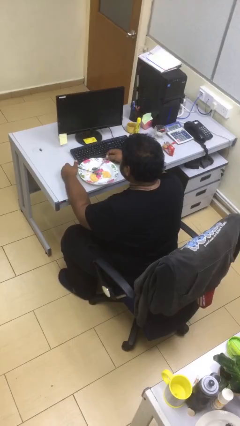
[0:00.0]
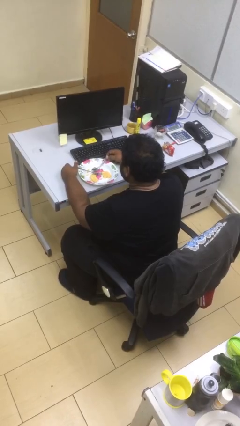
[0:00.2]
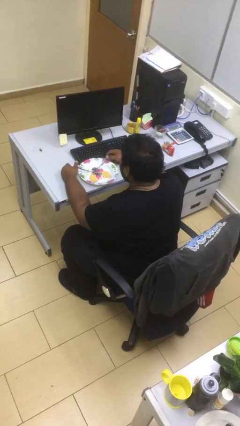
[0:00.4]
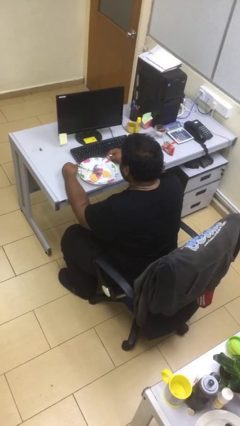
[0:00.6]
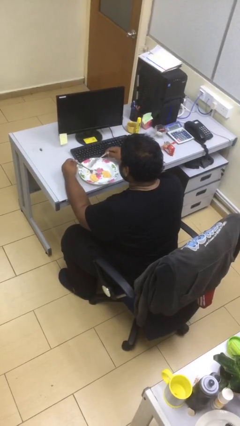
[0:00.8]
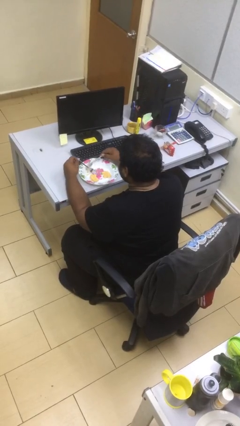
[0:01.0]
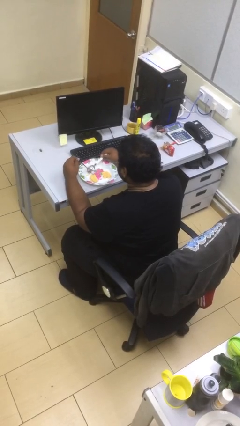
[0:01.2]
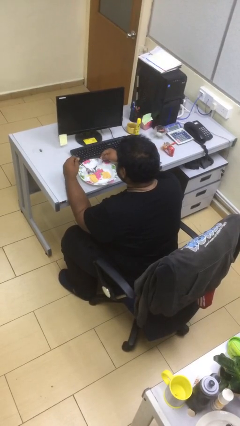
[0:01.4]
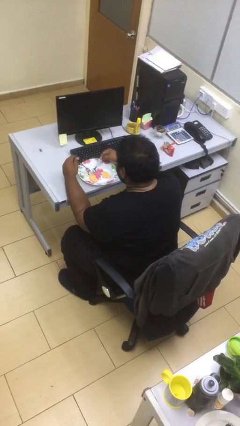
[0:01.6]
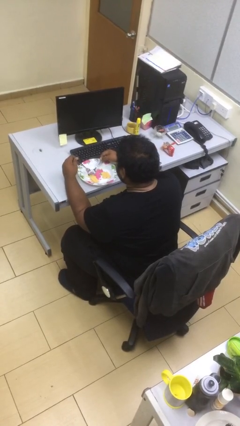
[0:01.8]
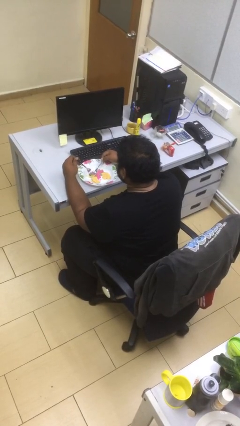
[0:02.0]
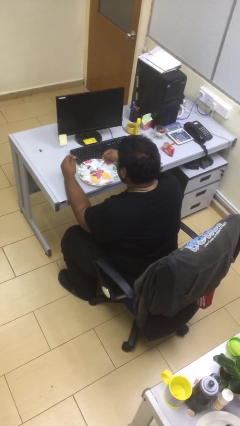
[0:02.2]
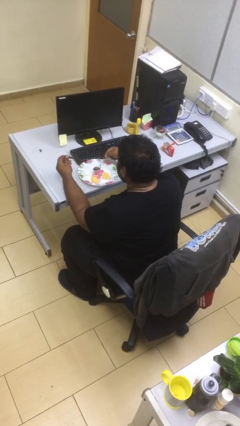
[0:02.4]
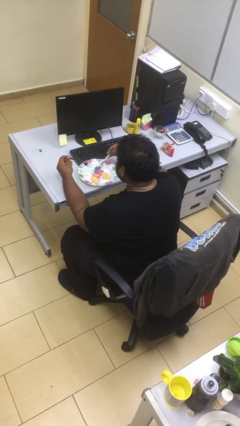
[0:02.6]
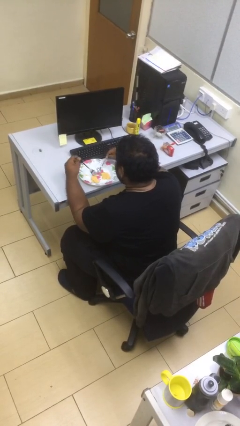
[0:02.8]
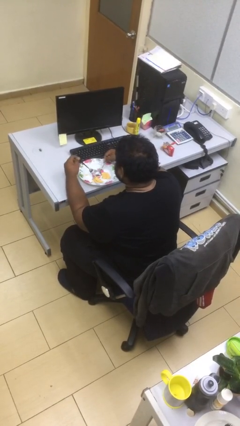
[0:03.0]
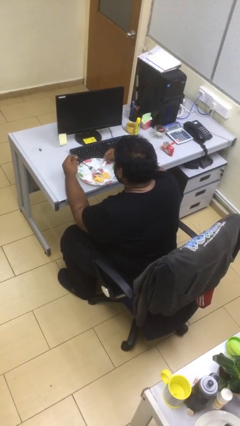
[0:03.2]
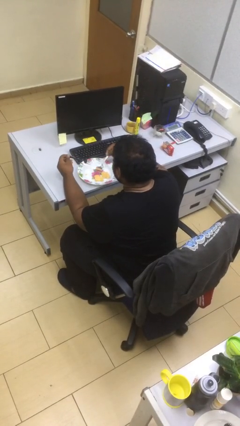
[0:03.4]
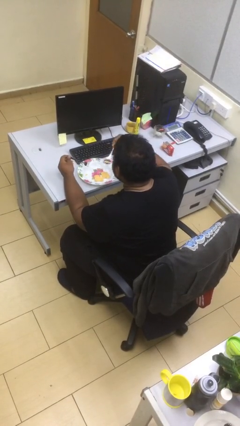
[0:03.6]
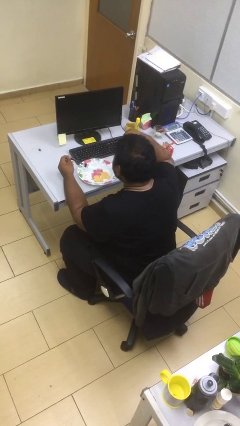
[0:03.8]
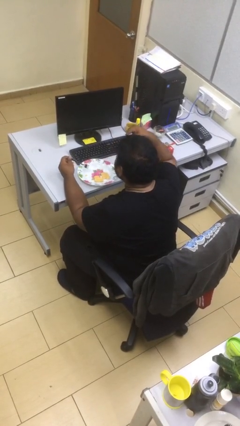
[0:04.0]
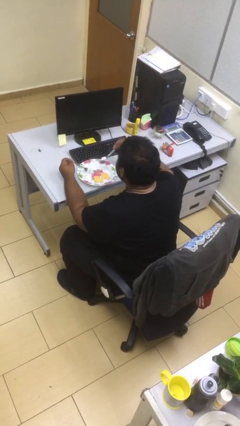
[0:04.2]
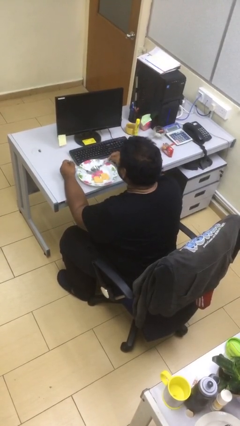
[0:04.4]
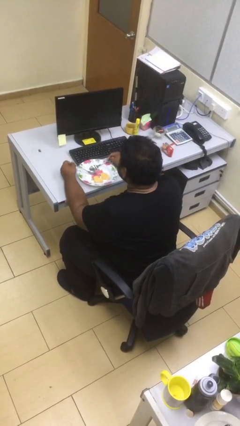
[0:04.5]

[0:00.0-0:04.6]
person eats with utensil

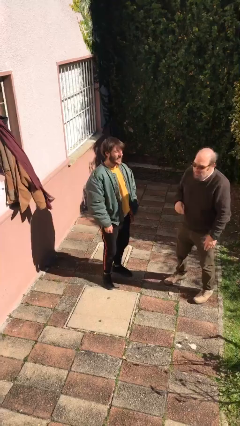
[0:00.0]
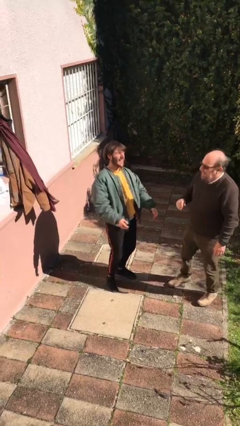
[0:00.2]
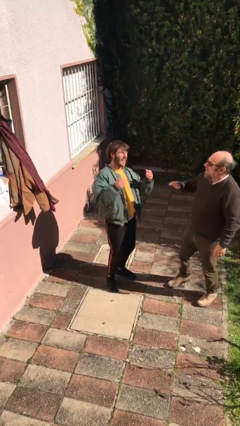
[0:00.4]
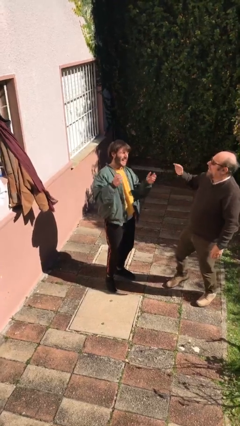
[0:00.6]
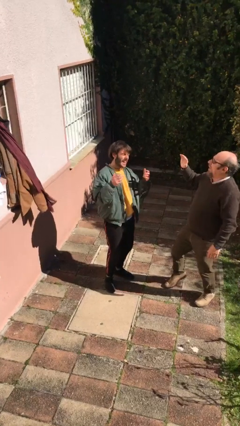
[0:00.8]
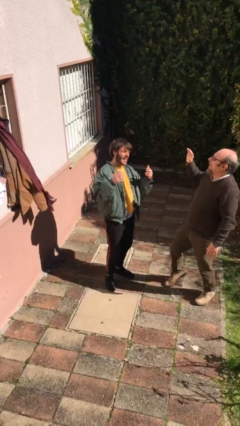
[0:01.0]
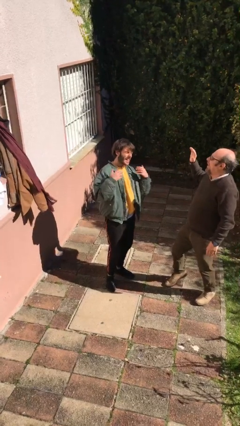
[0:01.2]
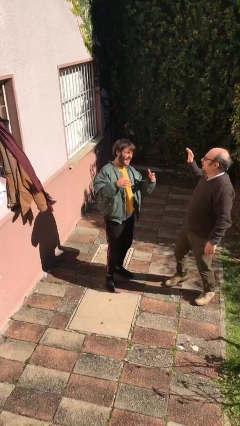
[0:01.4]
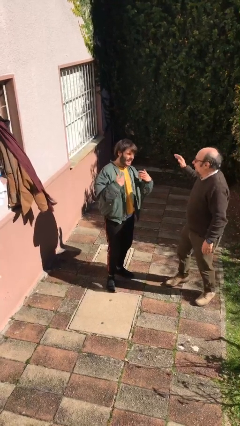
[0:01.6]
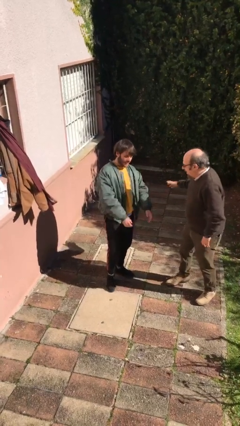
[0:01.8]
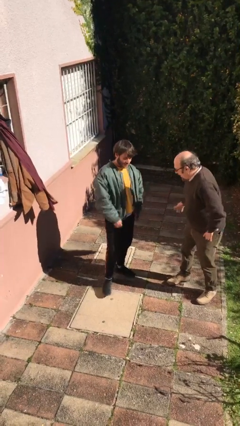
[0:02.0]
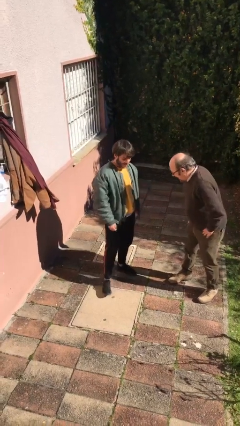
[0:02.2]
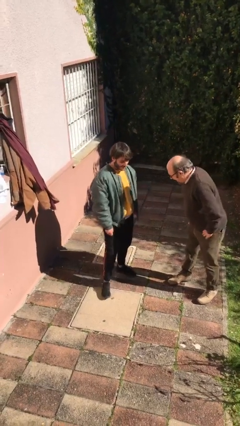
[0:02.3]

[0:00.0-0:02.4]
person laughs with person

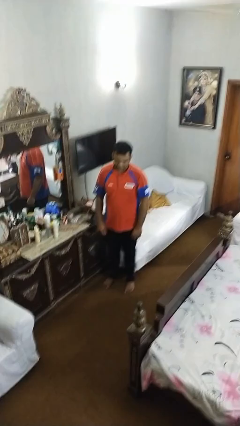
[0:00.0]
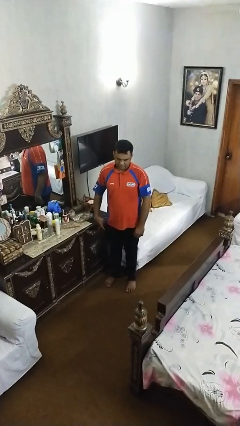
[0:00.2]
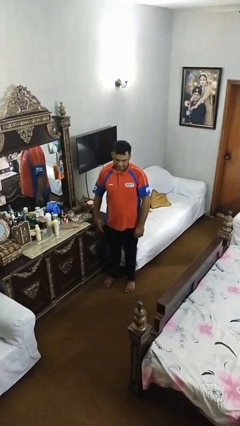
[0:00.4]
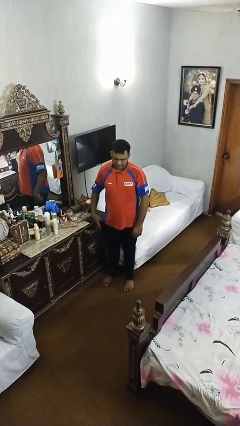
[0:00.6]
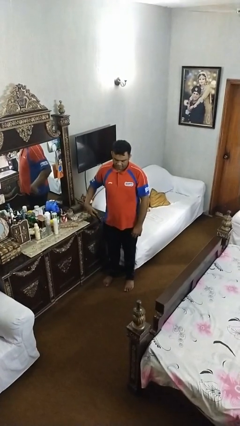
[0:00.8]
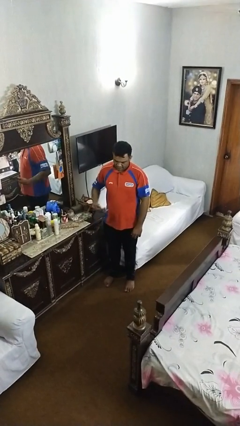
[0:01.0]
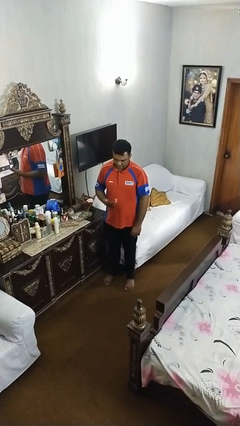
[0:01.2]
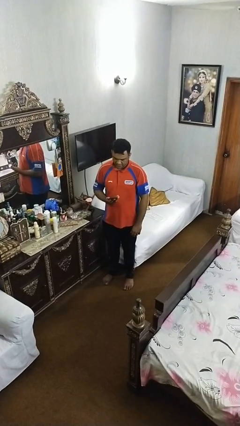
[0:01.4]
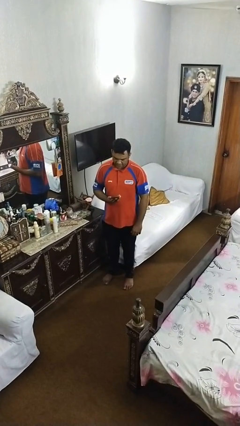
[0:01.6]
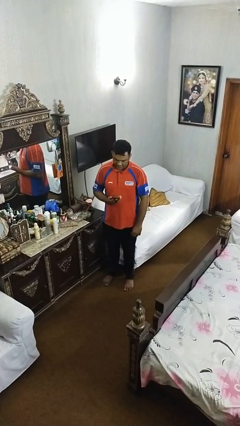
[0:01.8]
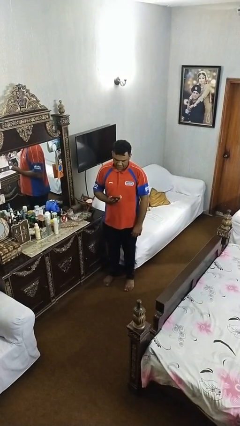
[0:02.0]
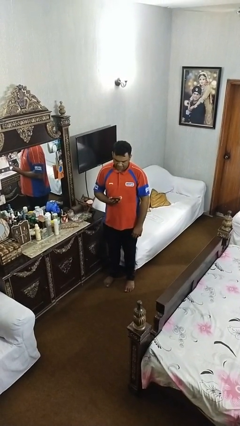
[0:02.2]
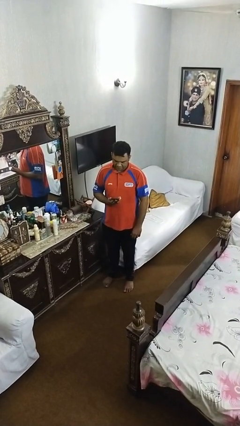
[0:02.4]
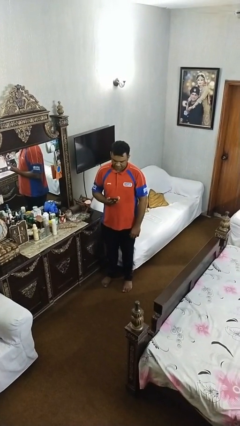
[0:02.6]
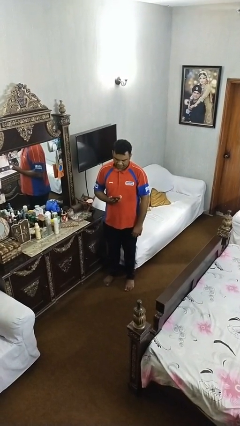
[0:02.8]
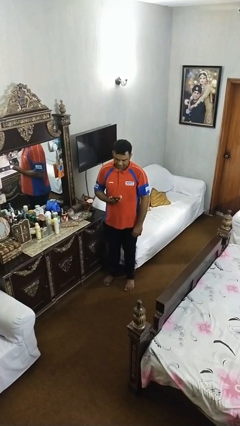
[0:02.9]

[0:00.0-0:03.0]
person takes phone from pocket

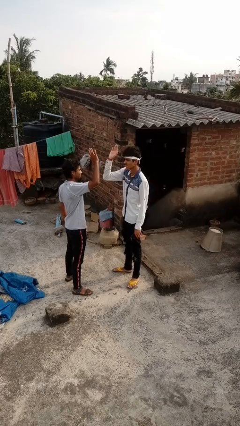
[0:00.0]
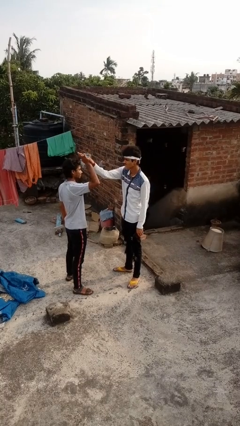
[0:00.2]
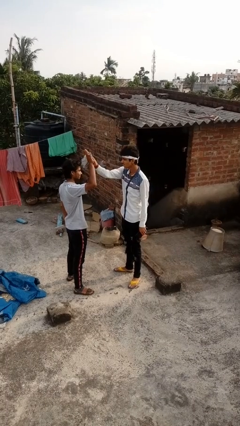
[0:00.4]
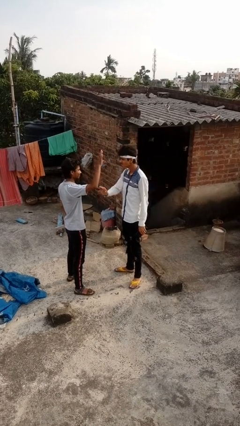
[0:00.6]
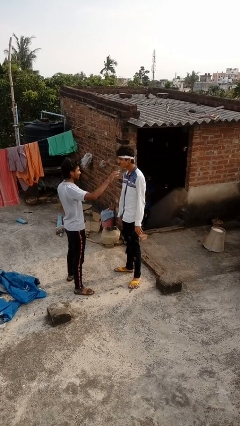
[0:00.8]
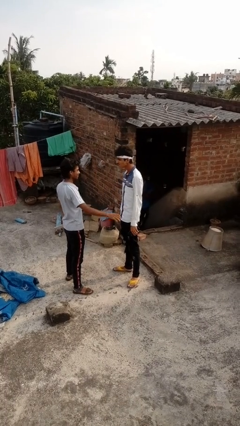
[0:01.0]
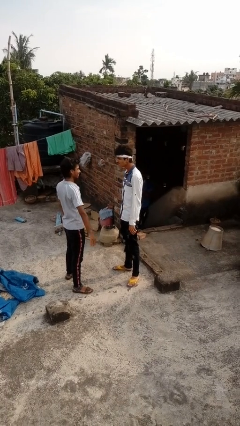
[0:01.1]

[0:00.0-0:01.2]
person highfives hand

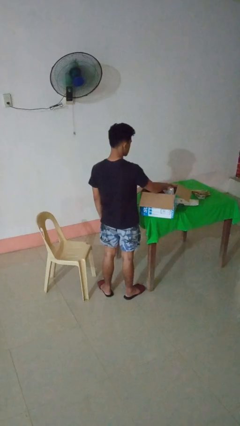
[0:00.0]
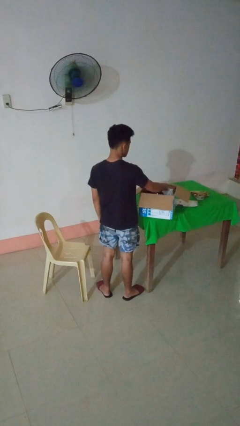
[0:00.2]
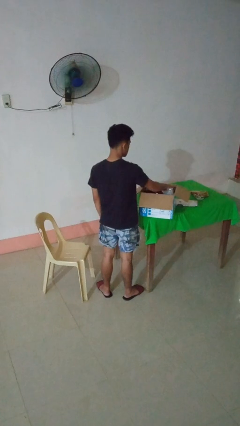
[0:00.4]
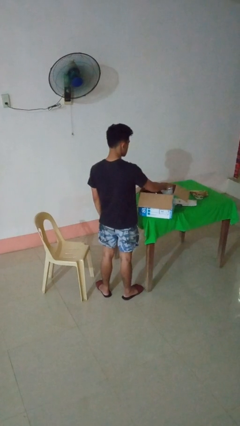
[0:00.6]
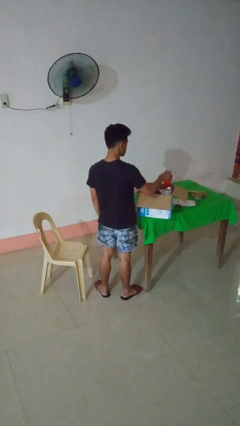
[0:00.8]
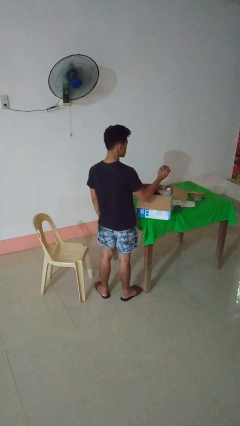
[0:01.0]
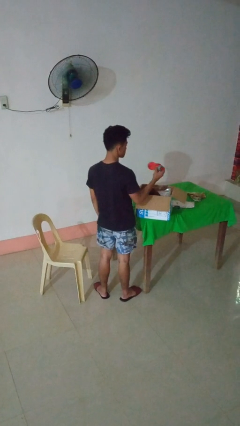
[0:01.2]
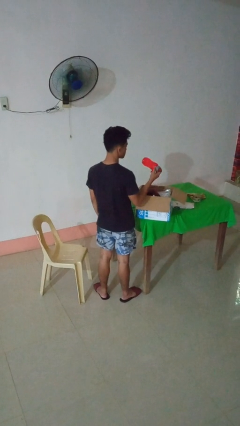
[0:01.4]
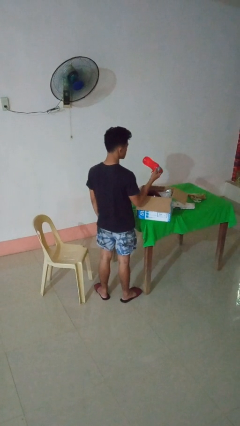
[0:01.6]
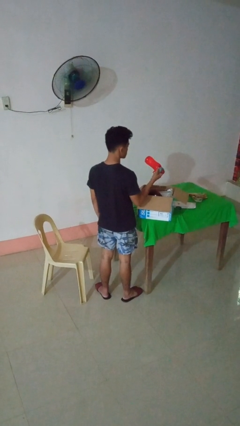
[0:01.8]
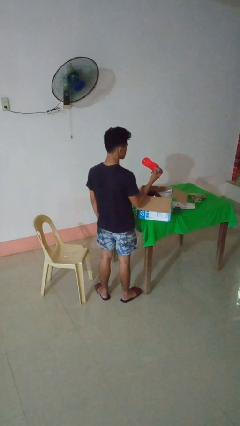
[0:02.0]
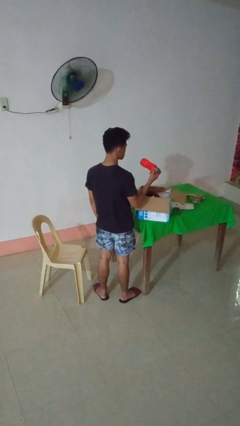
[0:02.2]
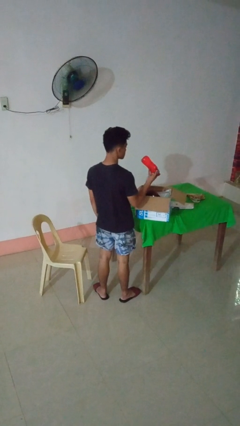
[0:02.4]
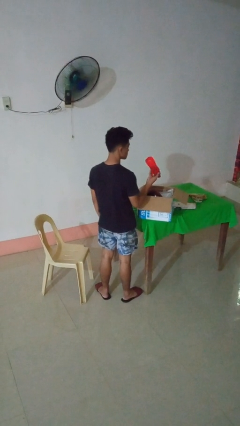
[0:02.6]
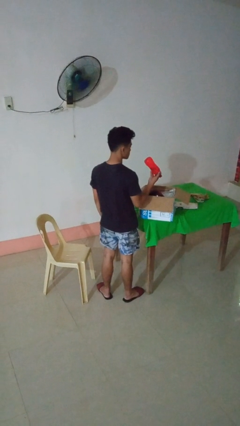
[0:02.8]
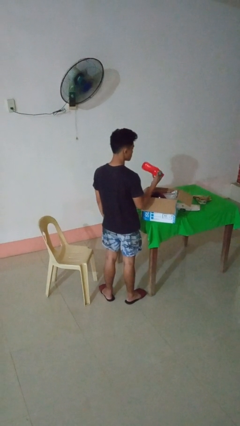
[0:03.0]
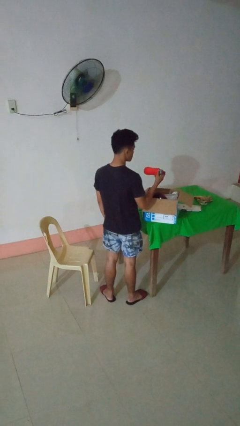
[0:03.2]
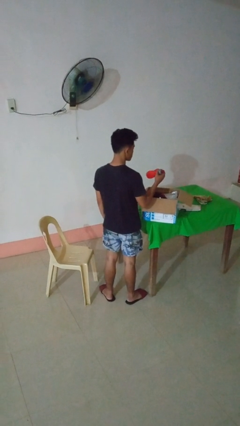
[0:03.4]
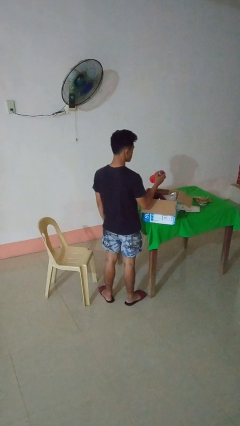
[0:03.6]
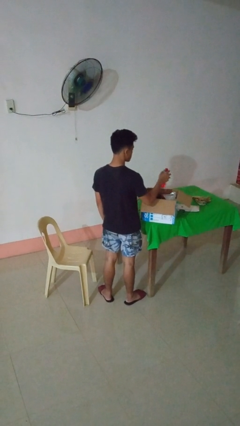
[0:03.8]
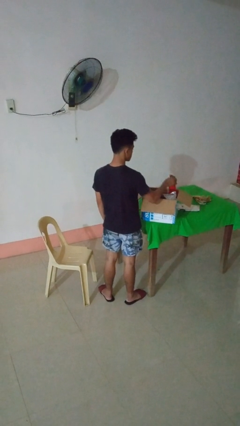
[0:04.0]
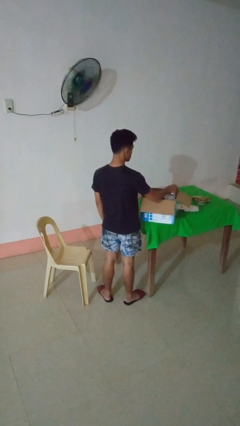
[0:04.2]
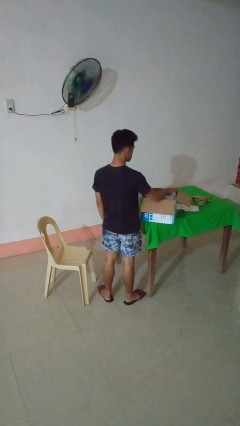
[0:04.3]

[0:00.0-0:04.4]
person takes object from box

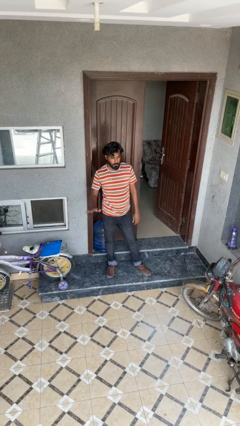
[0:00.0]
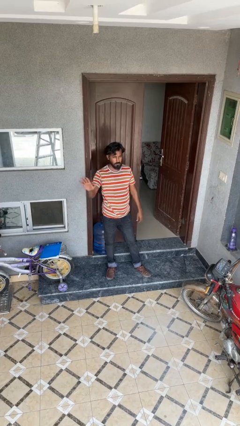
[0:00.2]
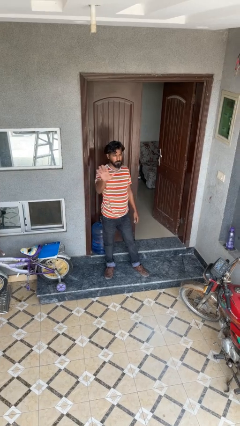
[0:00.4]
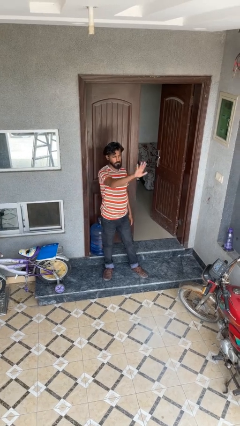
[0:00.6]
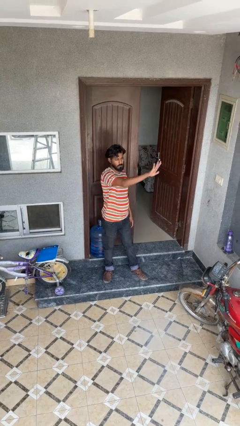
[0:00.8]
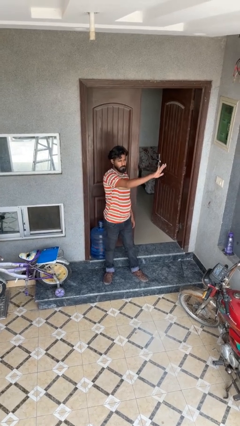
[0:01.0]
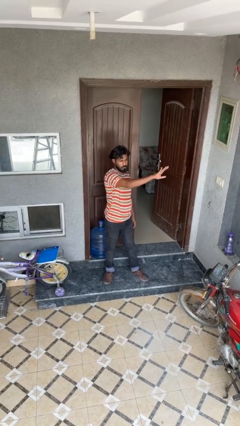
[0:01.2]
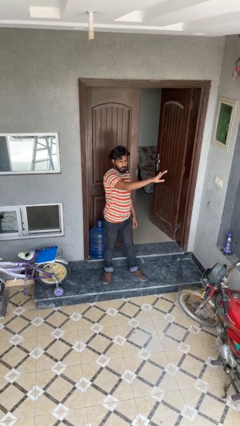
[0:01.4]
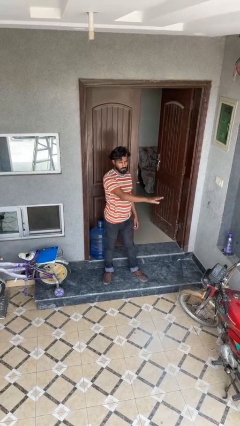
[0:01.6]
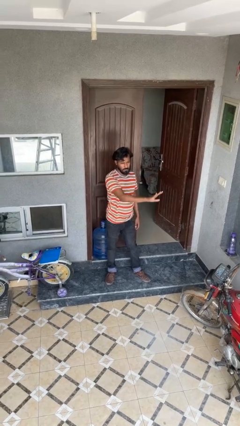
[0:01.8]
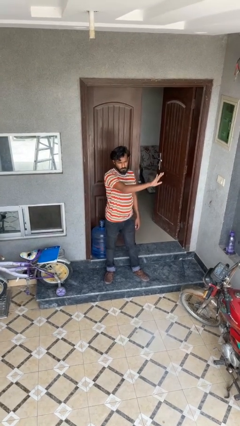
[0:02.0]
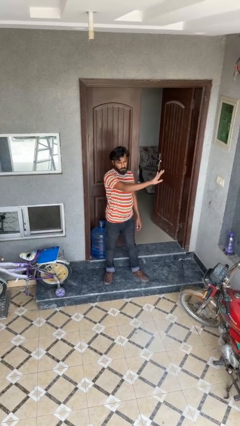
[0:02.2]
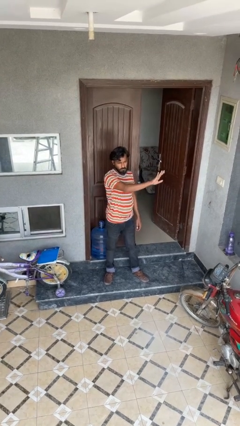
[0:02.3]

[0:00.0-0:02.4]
person gestures swipe left
